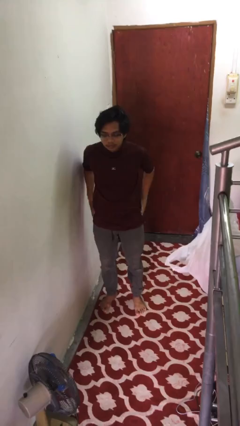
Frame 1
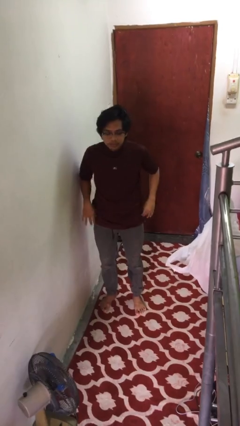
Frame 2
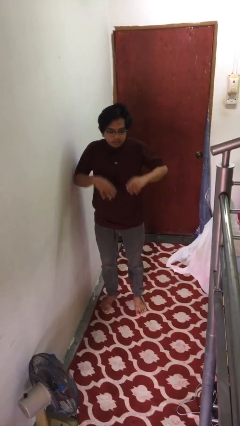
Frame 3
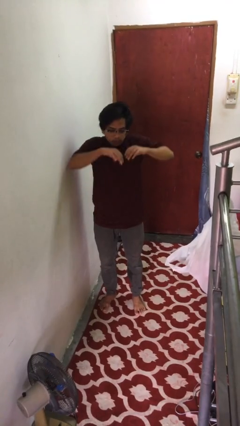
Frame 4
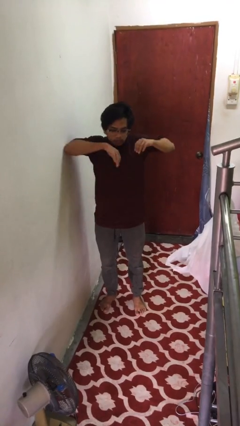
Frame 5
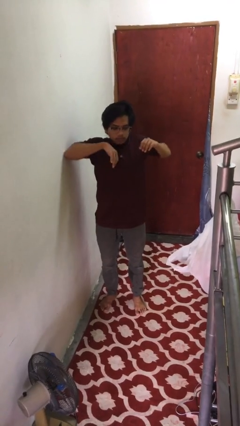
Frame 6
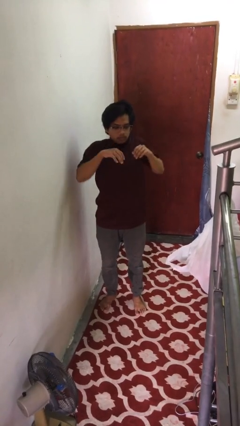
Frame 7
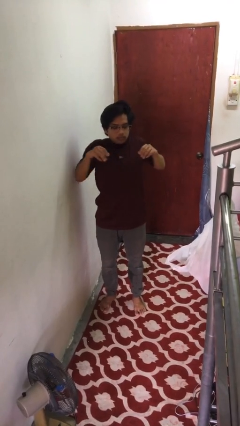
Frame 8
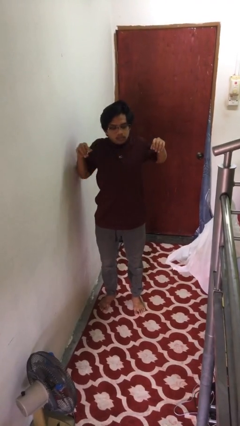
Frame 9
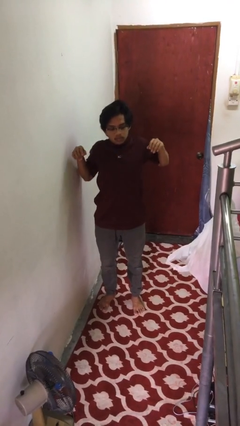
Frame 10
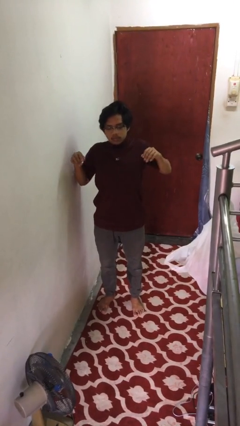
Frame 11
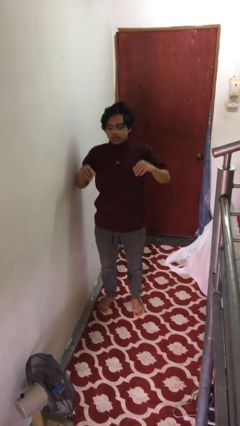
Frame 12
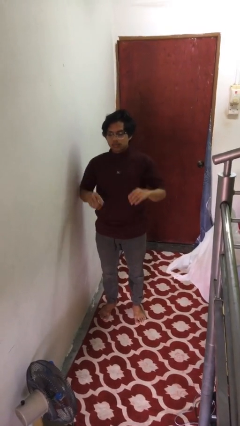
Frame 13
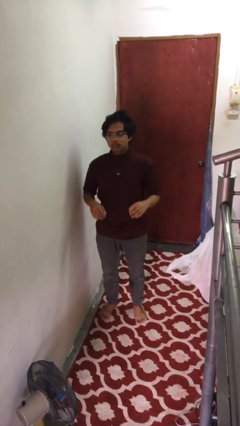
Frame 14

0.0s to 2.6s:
person stretches arms to side

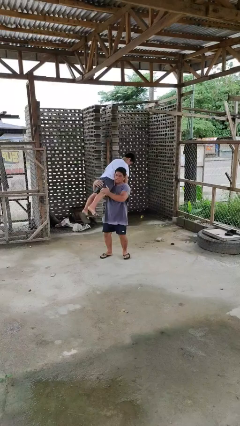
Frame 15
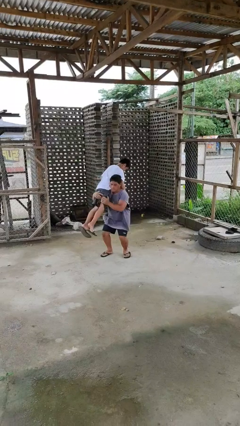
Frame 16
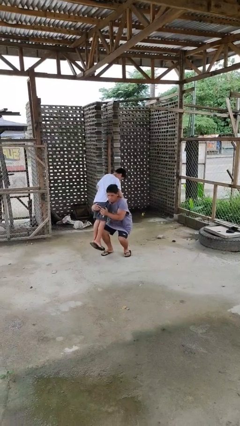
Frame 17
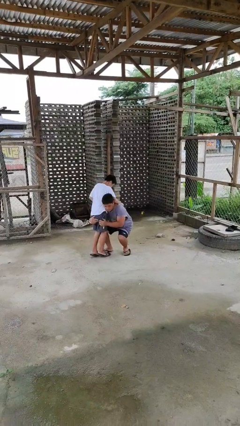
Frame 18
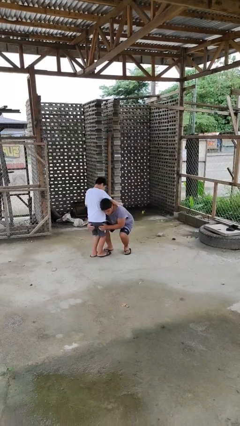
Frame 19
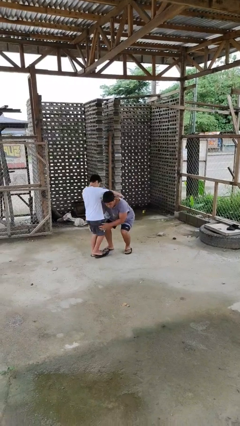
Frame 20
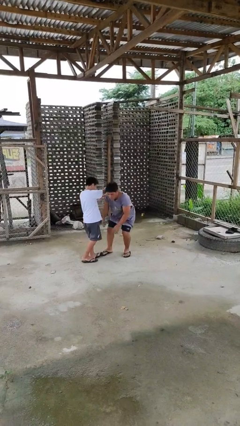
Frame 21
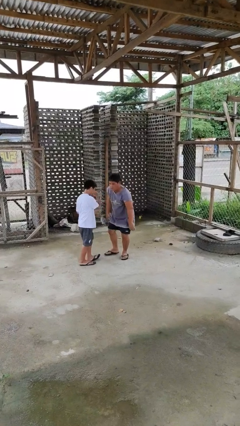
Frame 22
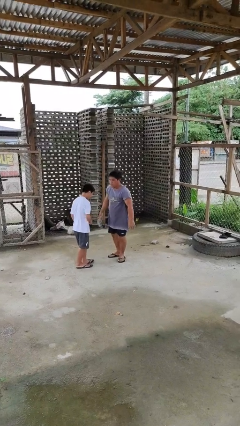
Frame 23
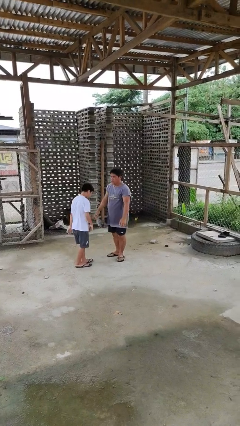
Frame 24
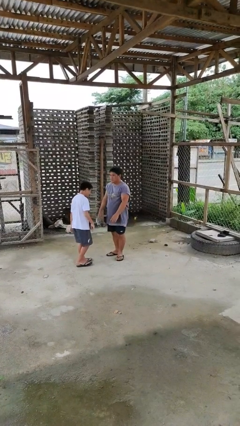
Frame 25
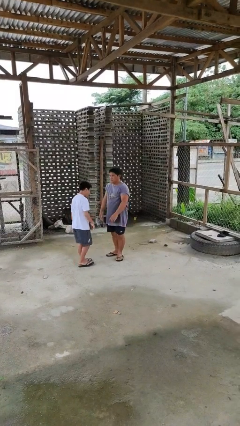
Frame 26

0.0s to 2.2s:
person puts down person

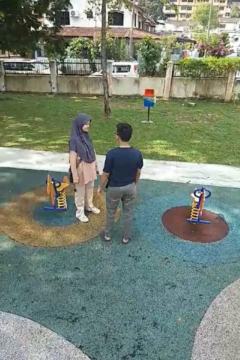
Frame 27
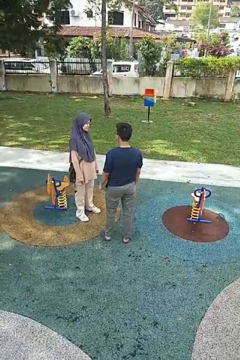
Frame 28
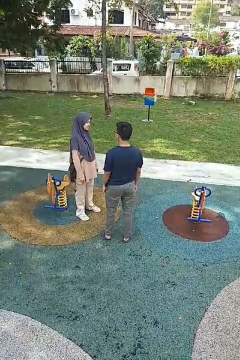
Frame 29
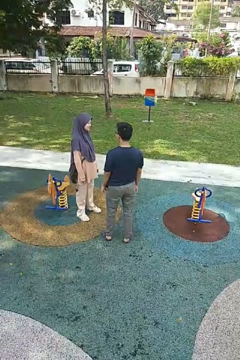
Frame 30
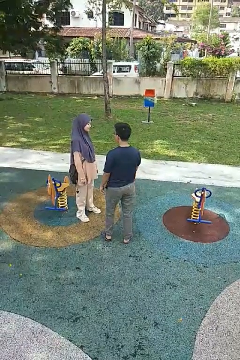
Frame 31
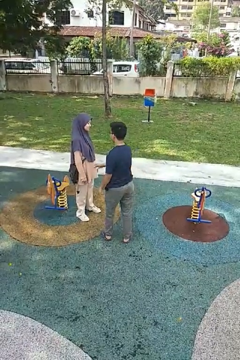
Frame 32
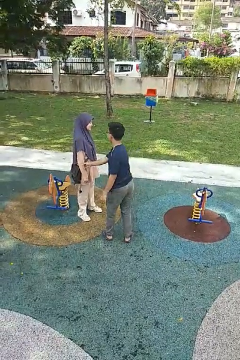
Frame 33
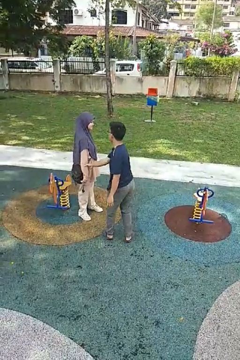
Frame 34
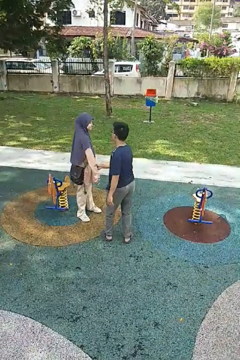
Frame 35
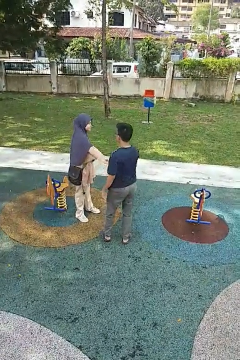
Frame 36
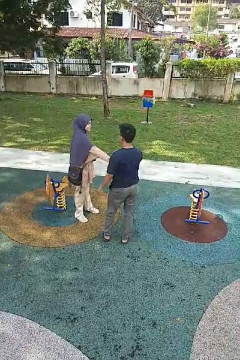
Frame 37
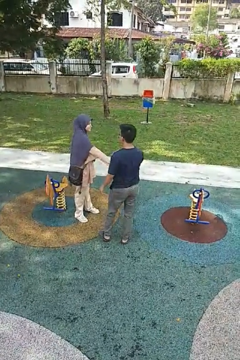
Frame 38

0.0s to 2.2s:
person grabs person by forearm

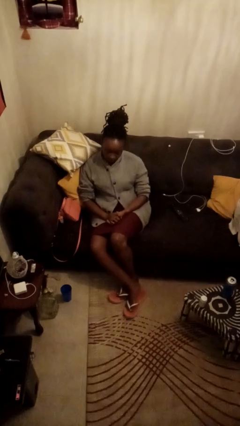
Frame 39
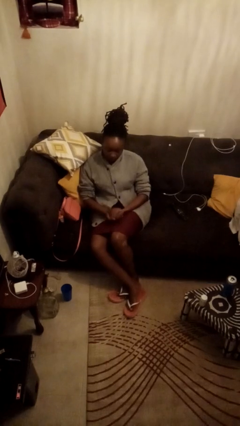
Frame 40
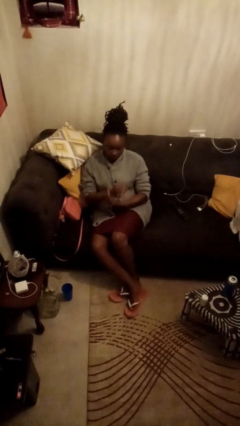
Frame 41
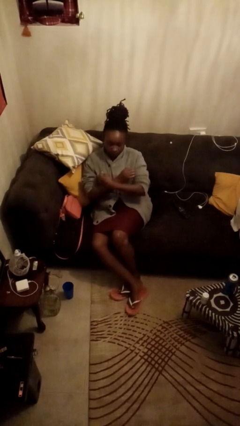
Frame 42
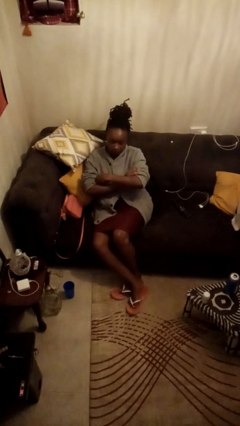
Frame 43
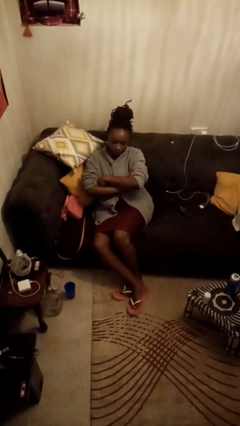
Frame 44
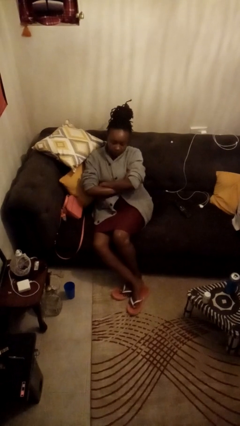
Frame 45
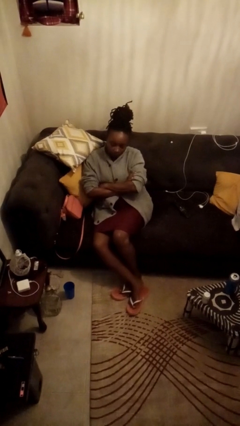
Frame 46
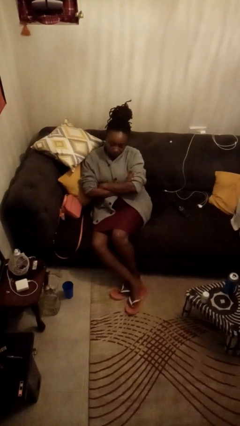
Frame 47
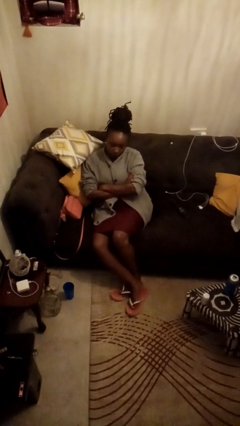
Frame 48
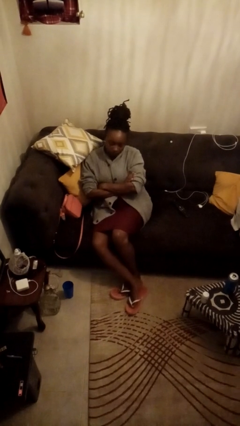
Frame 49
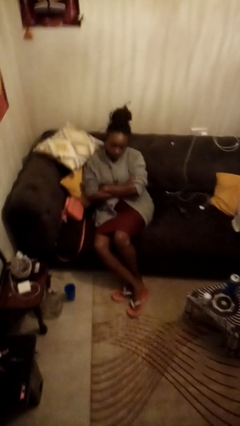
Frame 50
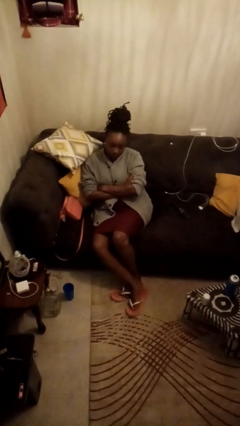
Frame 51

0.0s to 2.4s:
person crosses arms

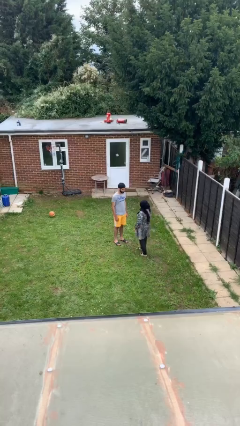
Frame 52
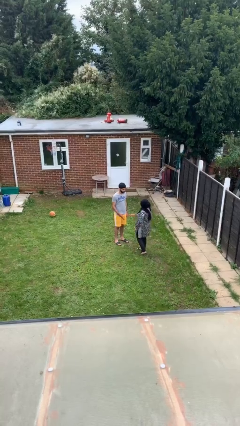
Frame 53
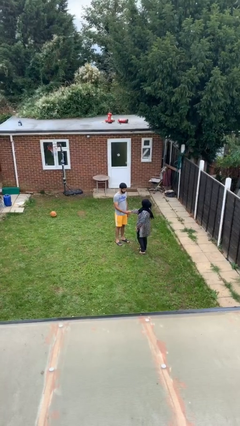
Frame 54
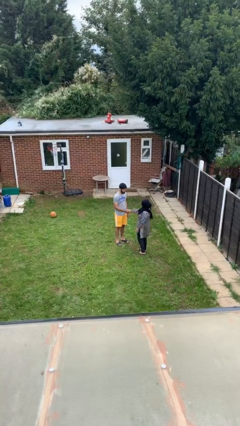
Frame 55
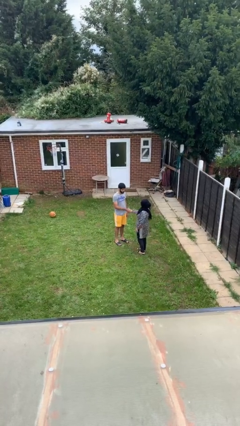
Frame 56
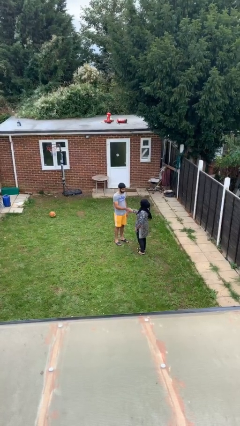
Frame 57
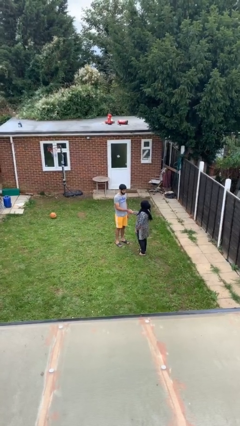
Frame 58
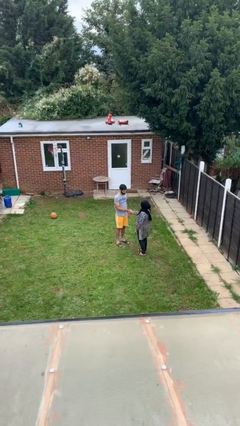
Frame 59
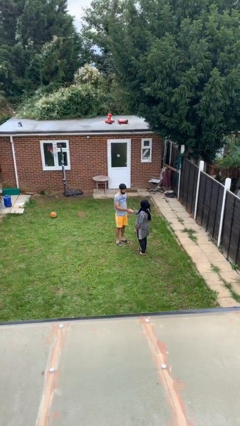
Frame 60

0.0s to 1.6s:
person shakes hand

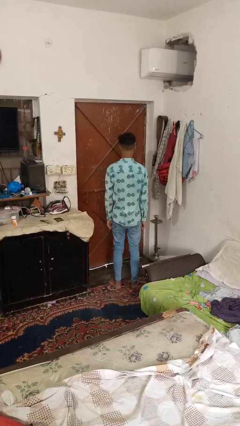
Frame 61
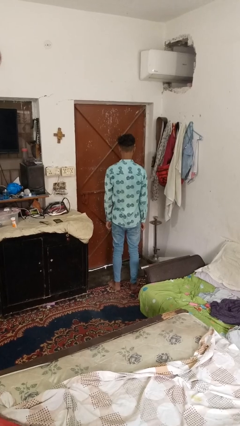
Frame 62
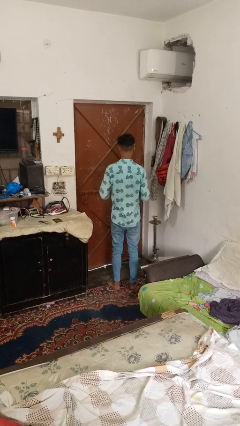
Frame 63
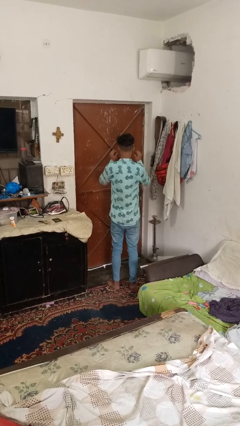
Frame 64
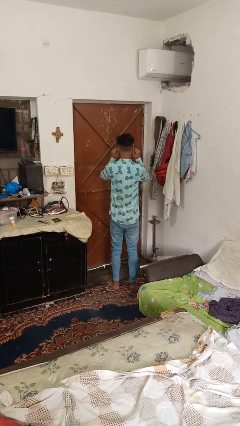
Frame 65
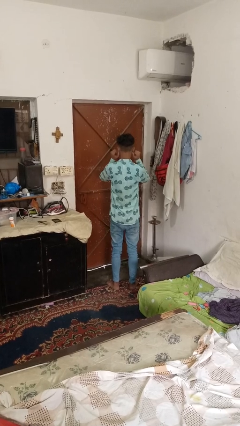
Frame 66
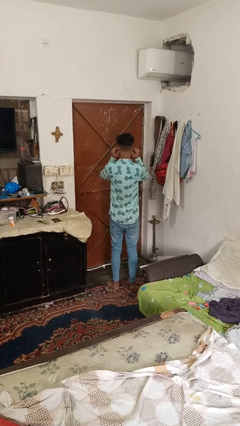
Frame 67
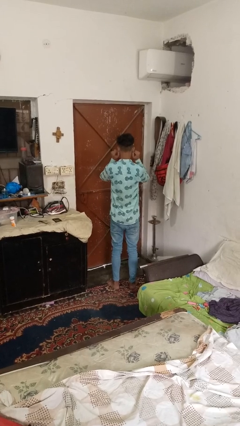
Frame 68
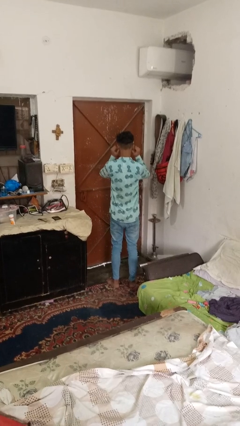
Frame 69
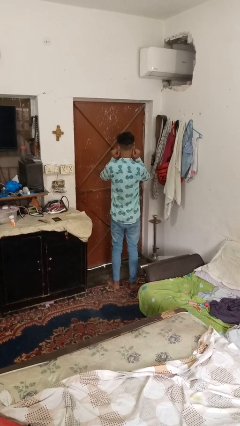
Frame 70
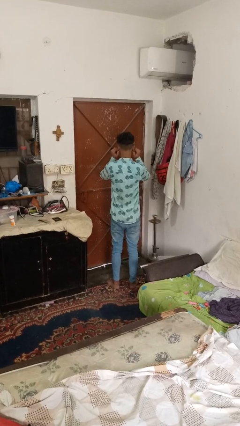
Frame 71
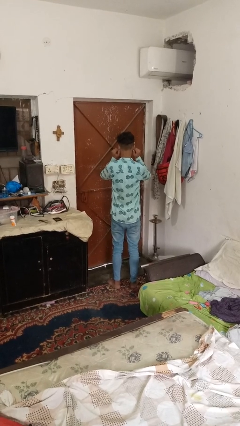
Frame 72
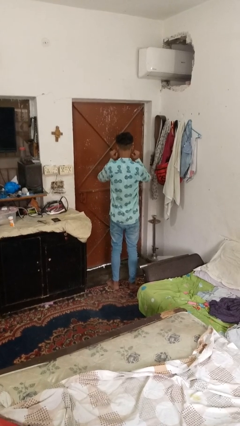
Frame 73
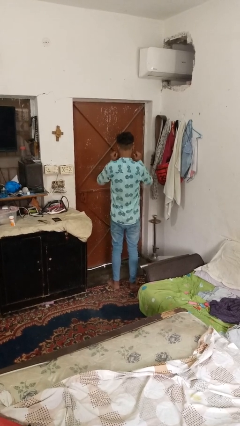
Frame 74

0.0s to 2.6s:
person touches earlobe

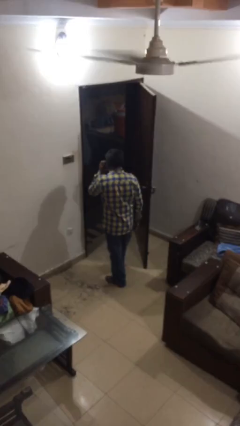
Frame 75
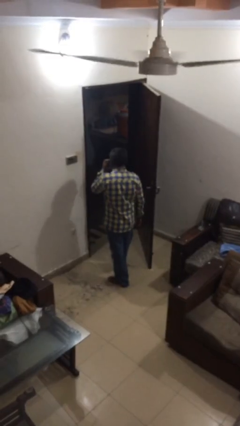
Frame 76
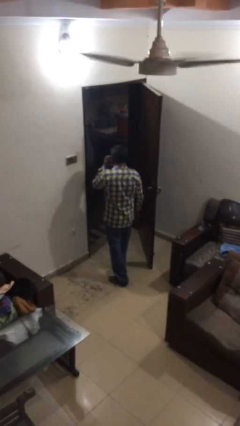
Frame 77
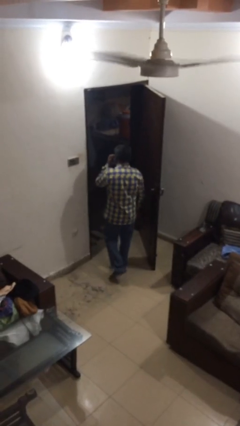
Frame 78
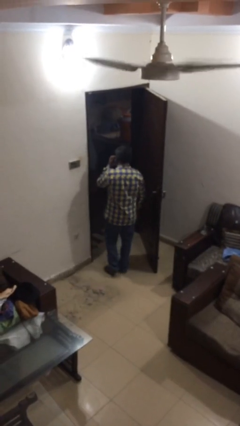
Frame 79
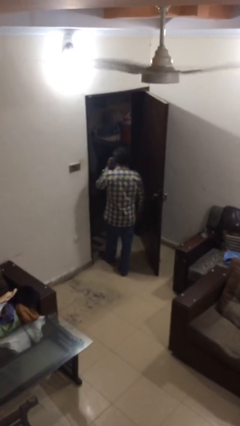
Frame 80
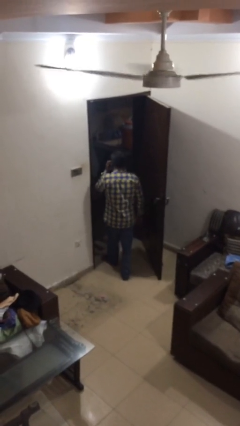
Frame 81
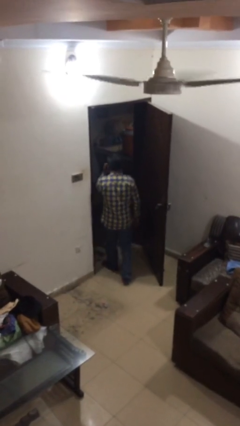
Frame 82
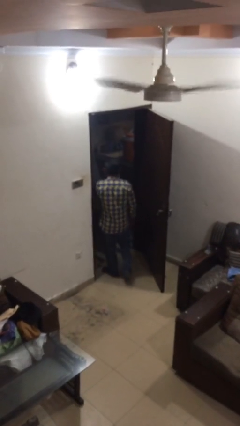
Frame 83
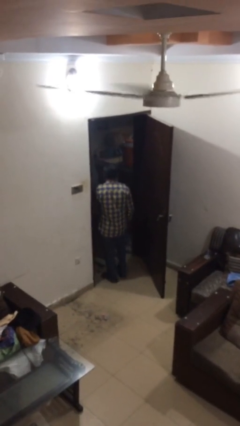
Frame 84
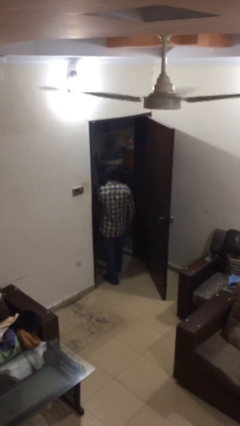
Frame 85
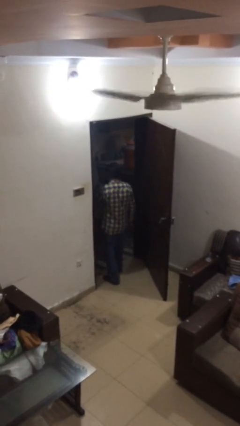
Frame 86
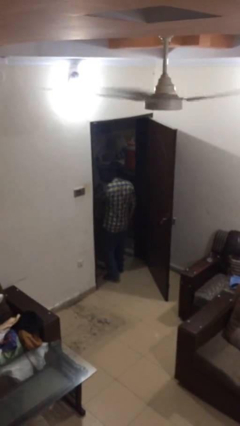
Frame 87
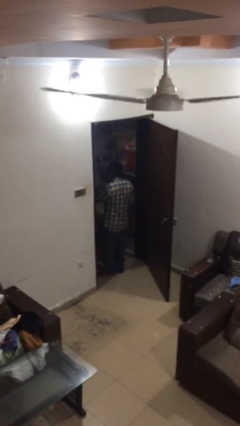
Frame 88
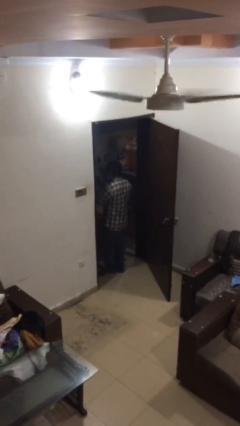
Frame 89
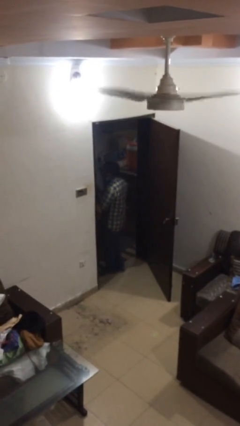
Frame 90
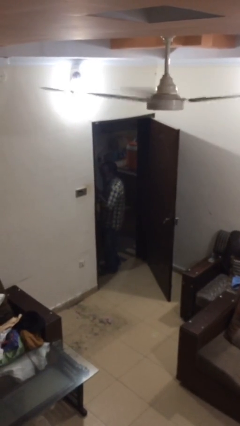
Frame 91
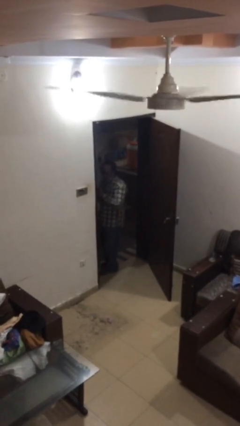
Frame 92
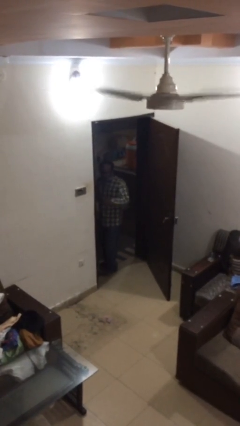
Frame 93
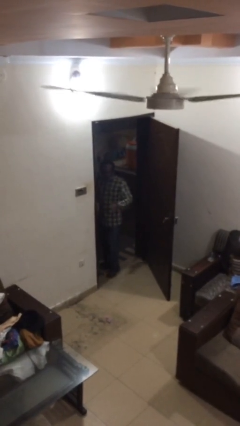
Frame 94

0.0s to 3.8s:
person exits scene through structure
